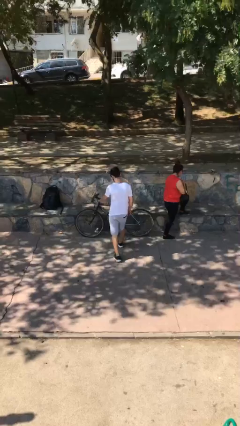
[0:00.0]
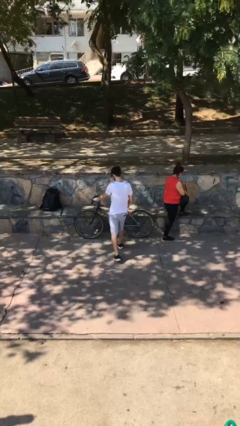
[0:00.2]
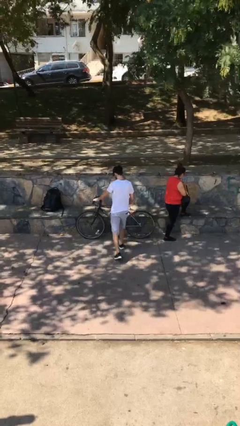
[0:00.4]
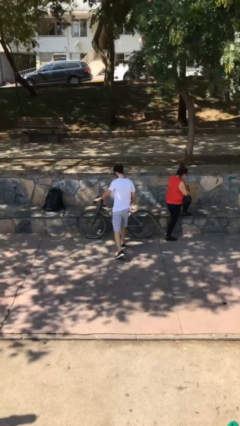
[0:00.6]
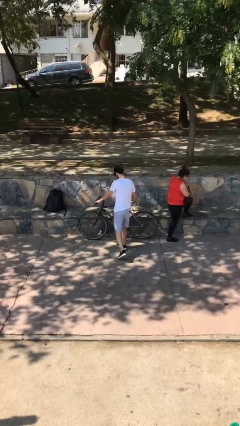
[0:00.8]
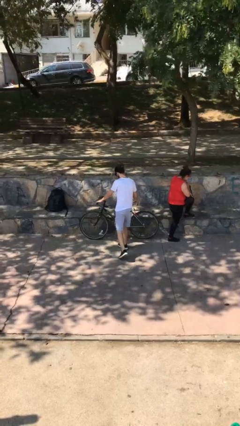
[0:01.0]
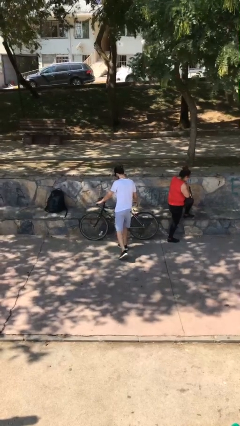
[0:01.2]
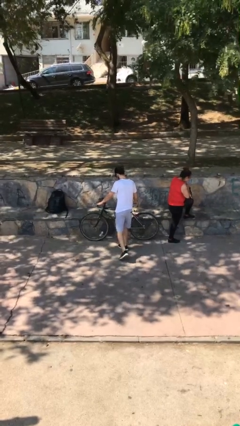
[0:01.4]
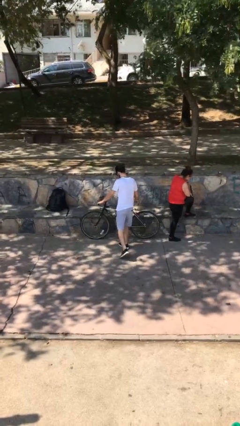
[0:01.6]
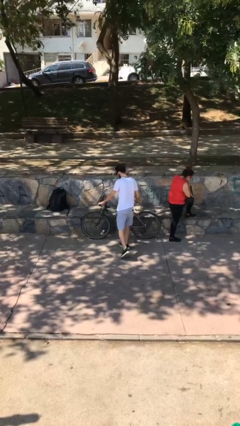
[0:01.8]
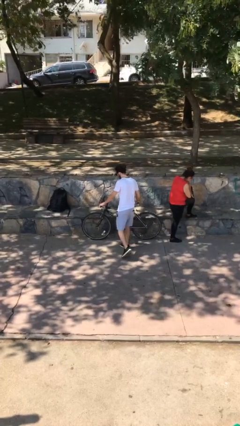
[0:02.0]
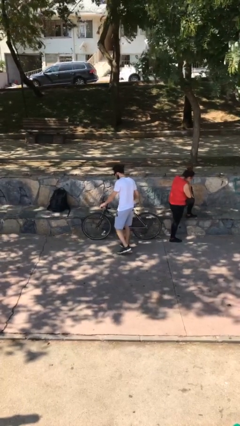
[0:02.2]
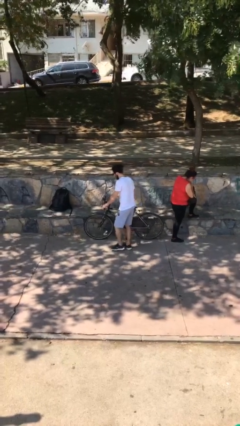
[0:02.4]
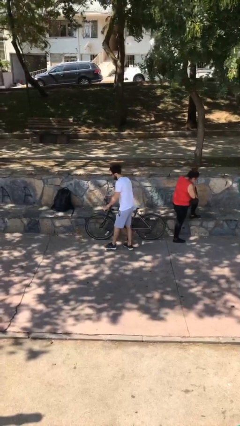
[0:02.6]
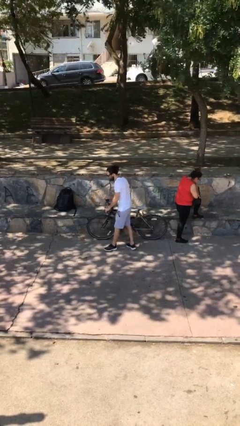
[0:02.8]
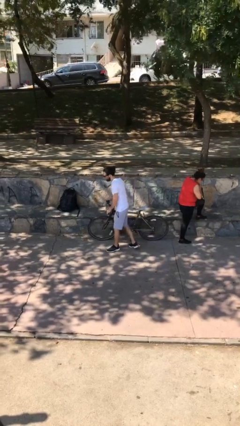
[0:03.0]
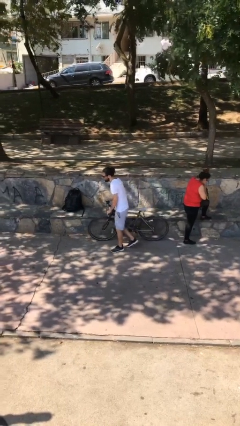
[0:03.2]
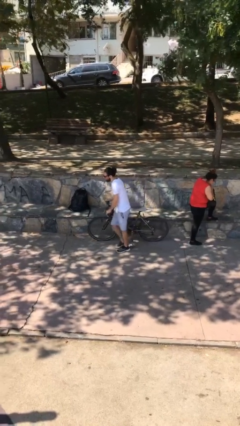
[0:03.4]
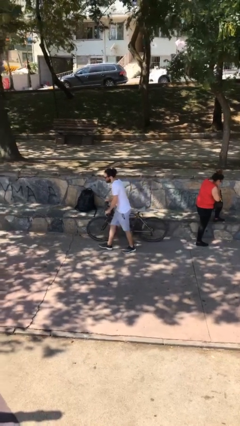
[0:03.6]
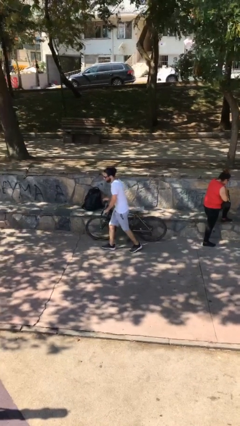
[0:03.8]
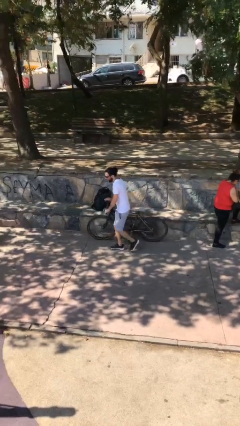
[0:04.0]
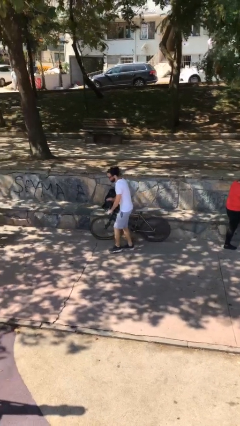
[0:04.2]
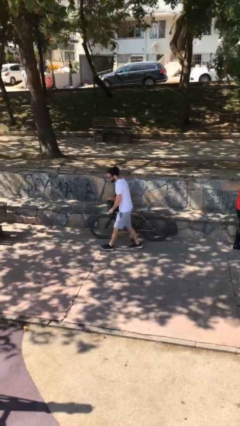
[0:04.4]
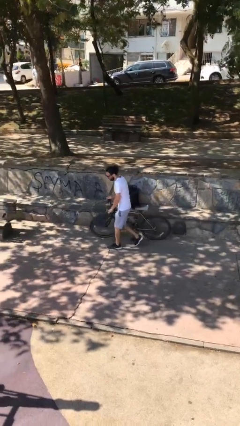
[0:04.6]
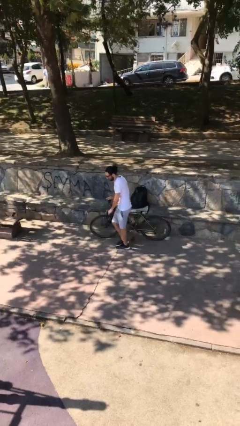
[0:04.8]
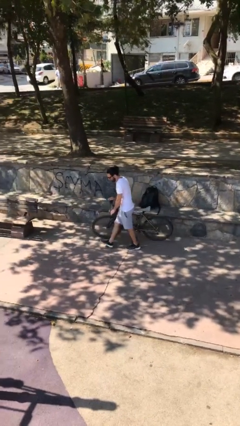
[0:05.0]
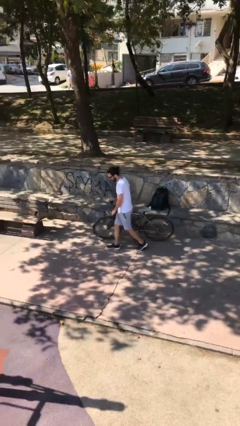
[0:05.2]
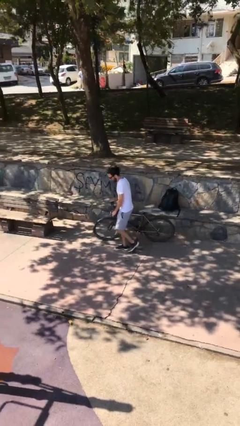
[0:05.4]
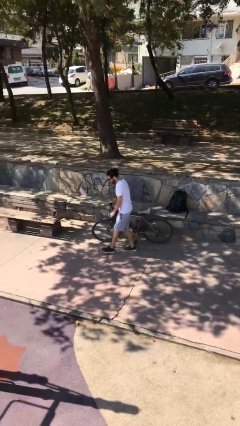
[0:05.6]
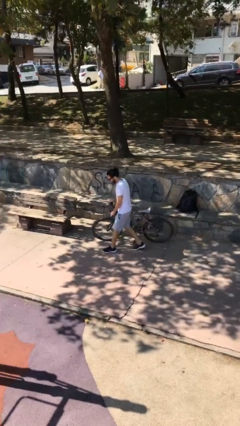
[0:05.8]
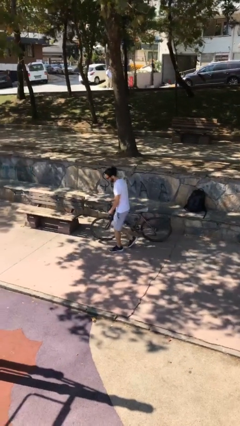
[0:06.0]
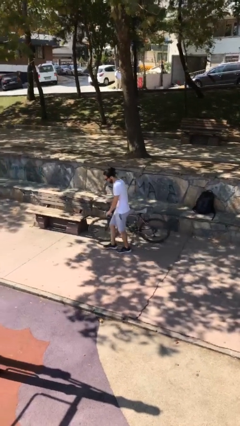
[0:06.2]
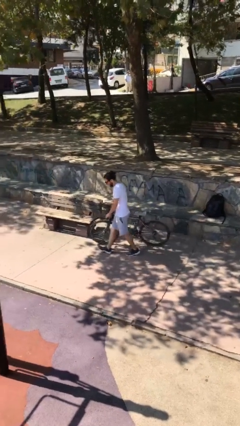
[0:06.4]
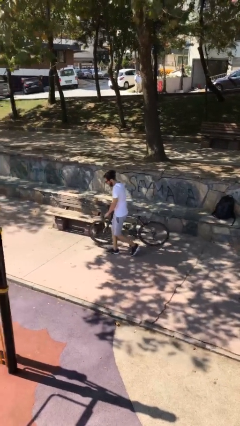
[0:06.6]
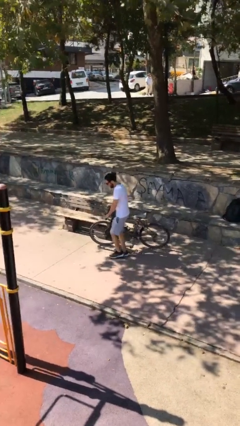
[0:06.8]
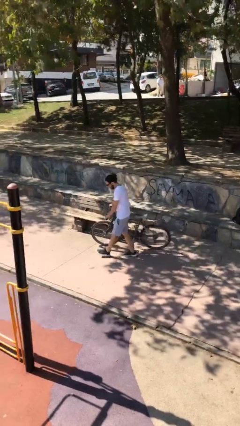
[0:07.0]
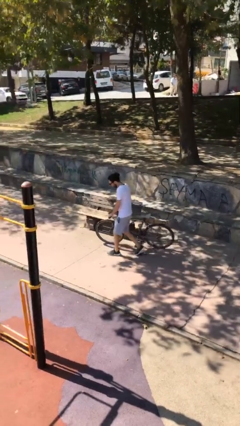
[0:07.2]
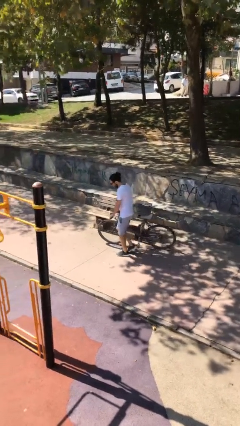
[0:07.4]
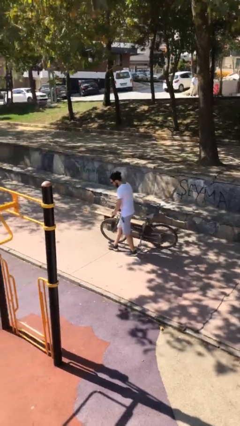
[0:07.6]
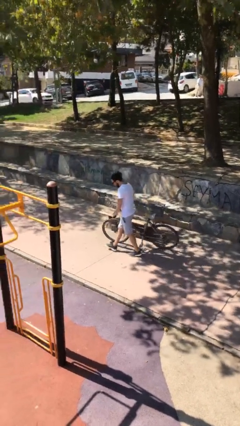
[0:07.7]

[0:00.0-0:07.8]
person steals object from person

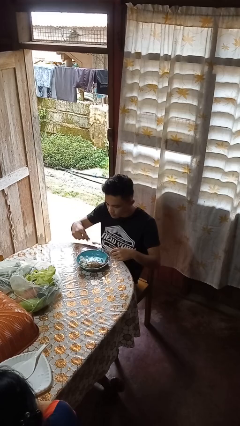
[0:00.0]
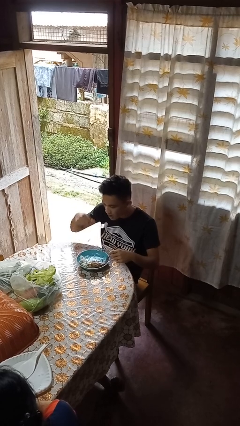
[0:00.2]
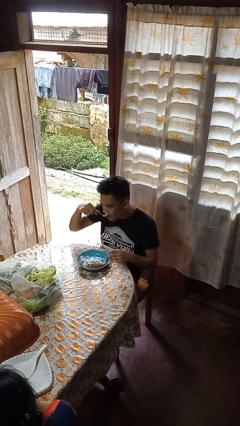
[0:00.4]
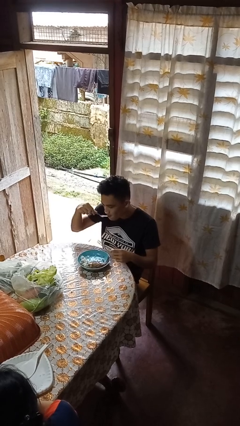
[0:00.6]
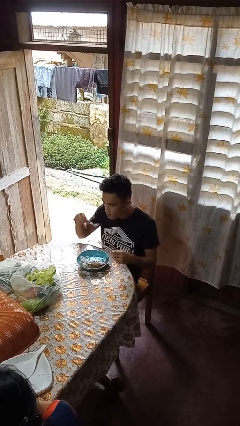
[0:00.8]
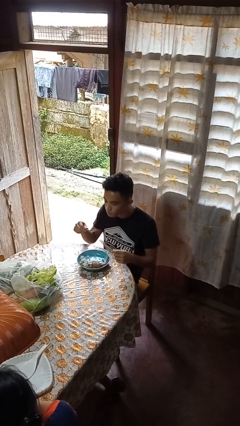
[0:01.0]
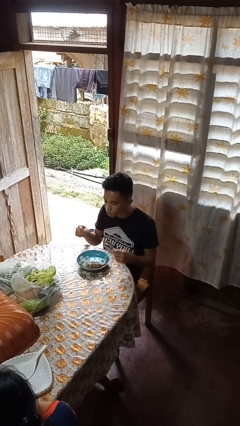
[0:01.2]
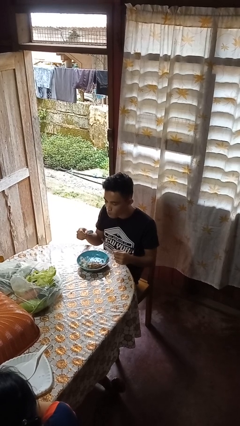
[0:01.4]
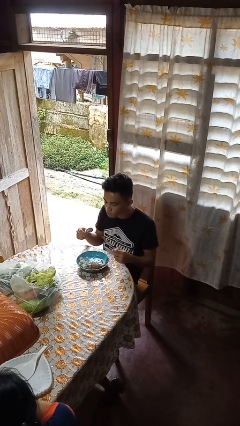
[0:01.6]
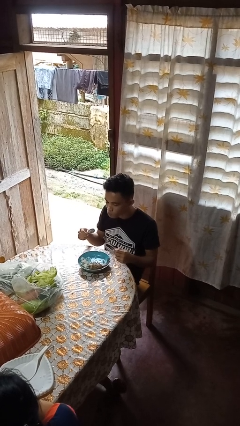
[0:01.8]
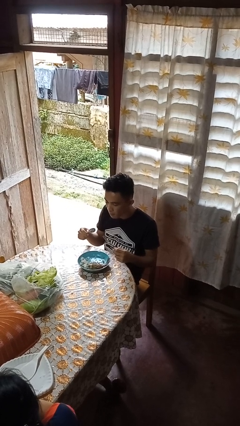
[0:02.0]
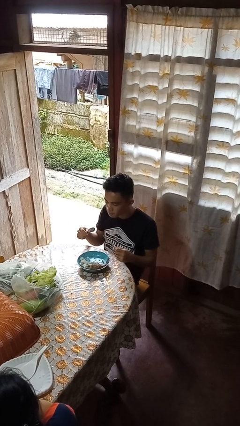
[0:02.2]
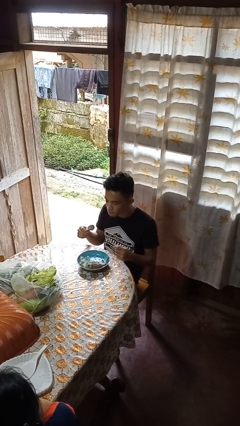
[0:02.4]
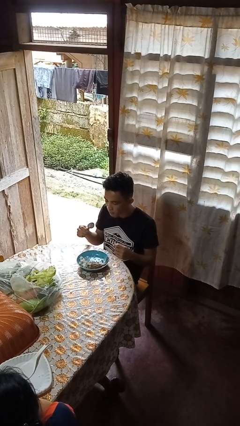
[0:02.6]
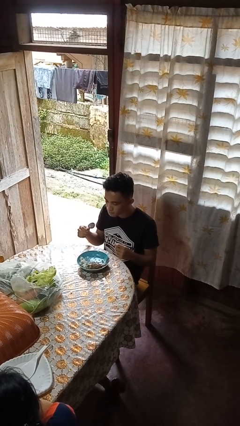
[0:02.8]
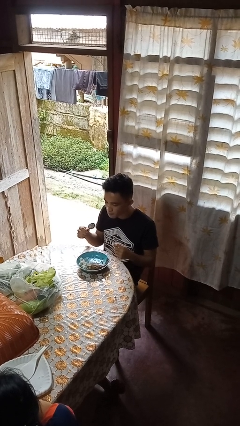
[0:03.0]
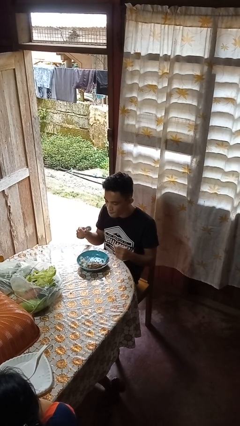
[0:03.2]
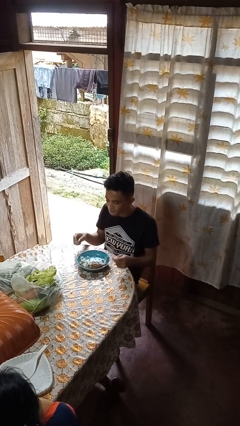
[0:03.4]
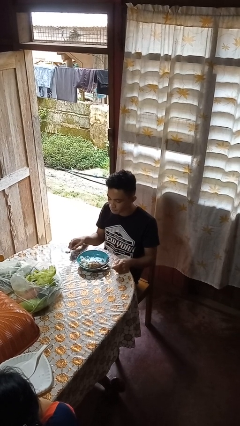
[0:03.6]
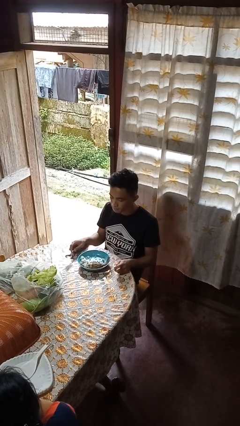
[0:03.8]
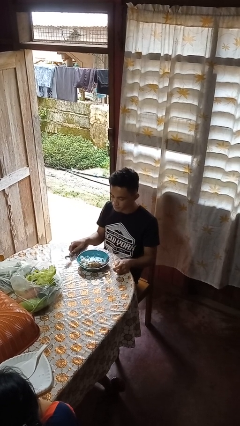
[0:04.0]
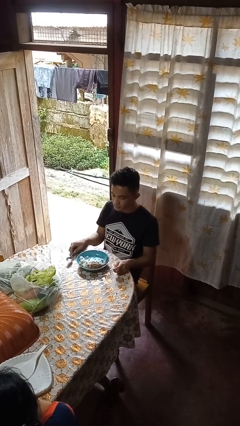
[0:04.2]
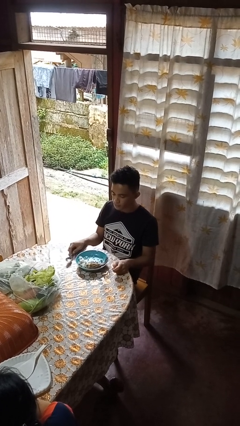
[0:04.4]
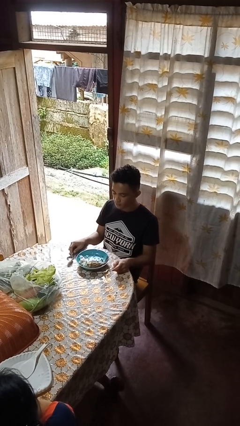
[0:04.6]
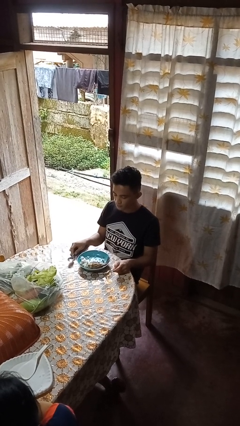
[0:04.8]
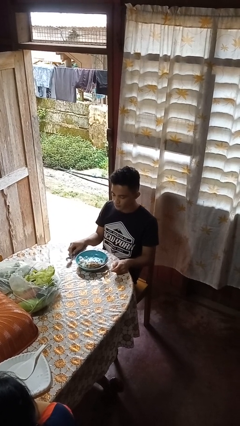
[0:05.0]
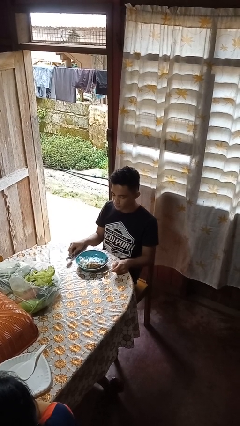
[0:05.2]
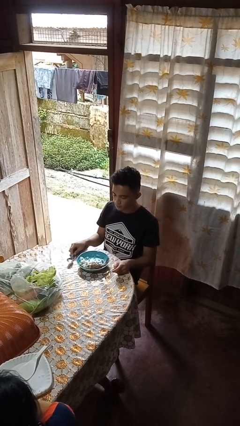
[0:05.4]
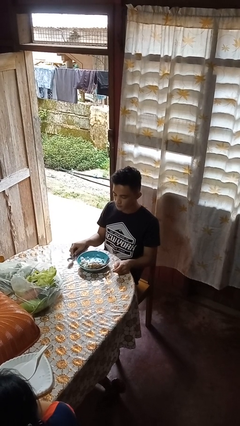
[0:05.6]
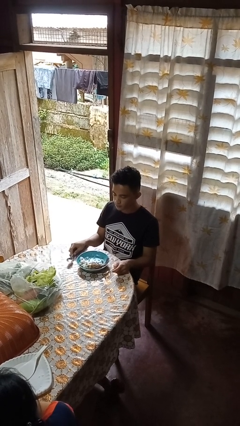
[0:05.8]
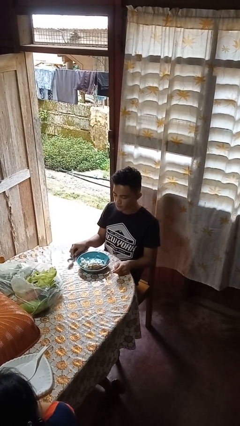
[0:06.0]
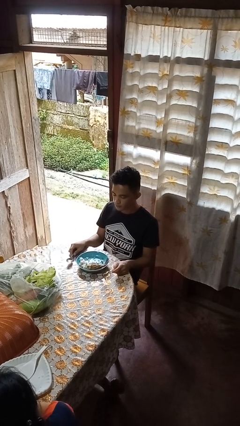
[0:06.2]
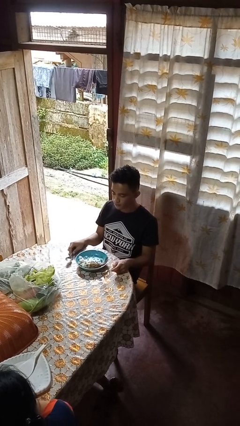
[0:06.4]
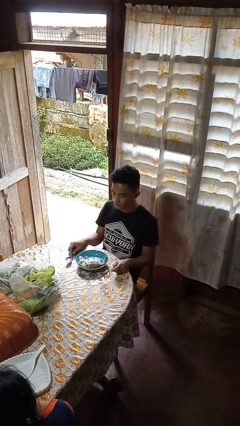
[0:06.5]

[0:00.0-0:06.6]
person eats with utensil

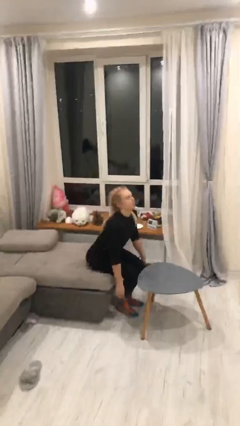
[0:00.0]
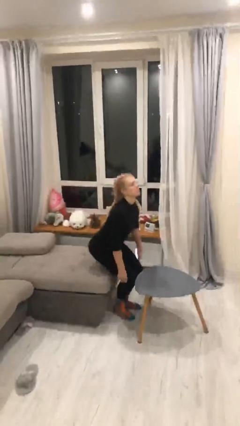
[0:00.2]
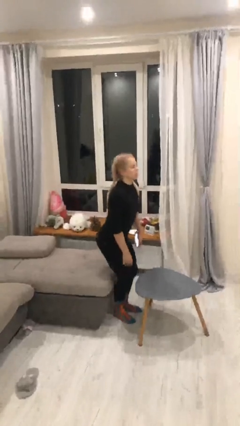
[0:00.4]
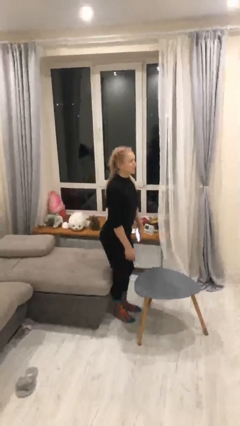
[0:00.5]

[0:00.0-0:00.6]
person stands up

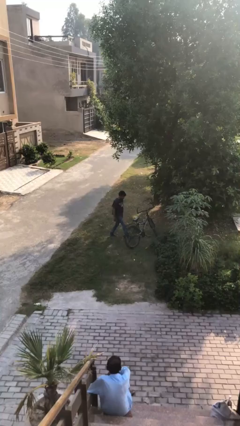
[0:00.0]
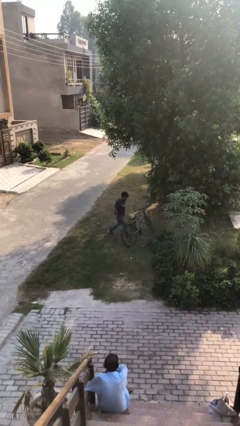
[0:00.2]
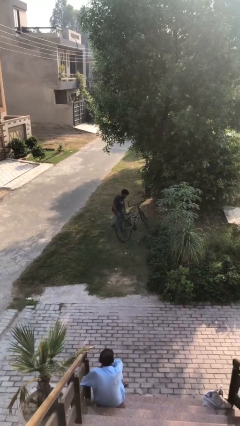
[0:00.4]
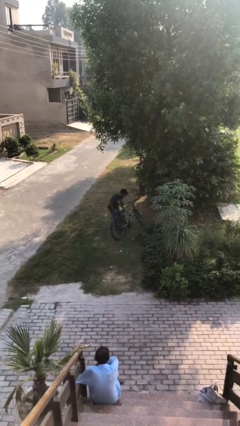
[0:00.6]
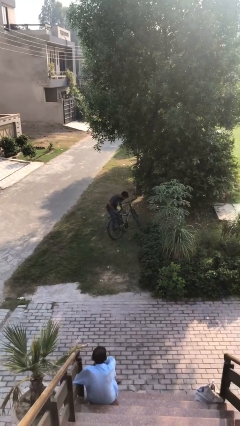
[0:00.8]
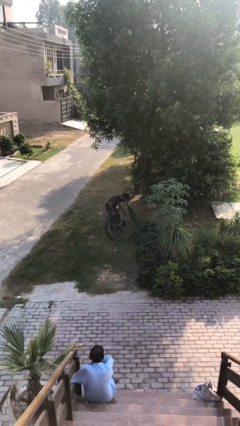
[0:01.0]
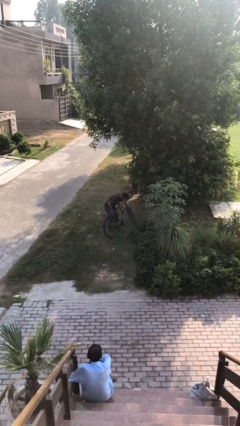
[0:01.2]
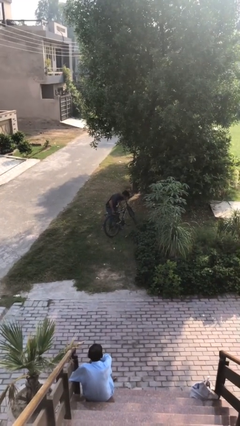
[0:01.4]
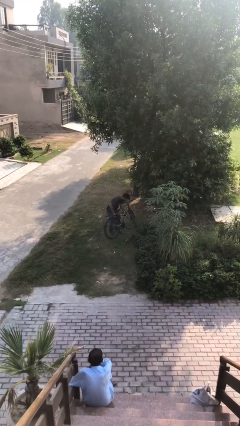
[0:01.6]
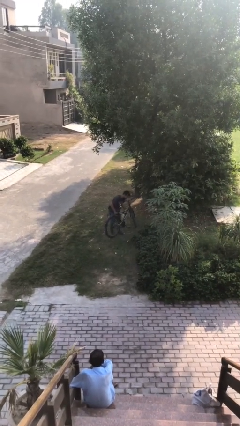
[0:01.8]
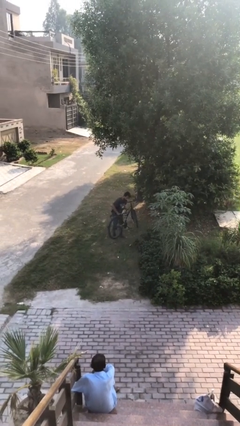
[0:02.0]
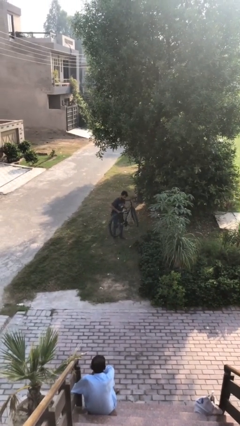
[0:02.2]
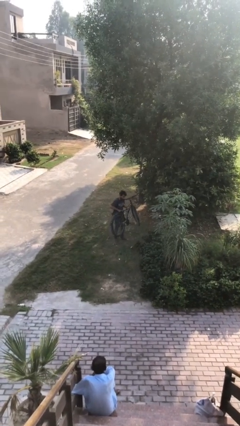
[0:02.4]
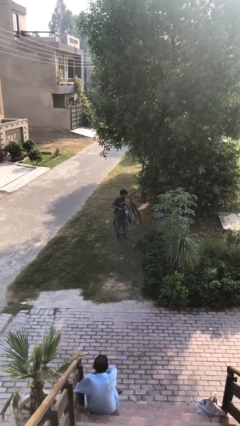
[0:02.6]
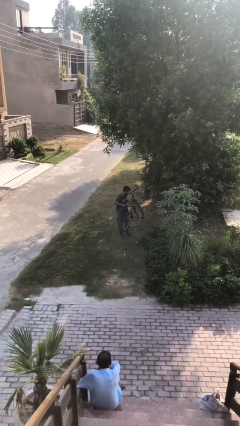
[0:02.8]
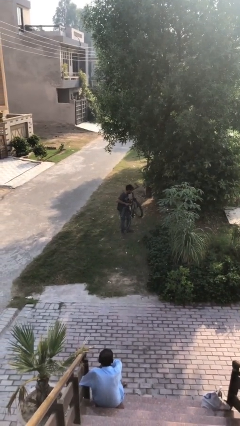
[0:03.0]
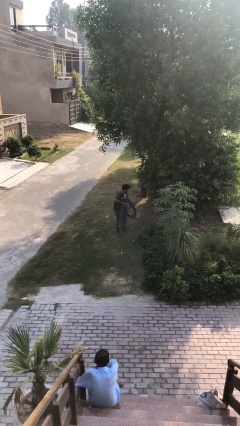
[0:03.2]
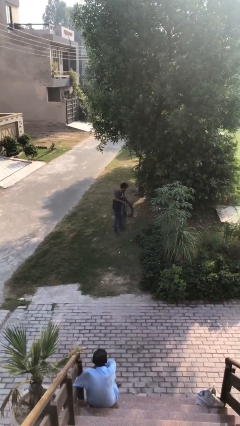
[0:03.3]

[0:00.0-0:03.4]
person picks up object from floor
